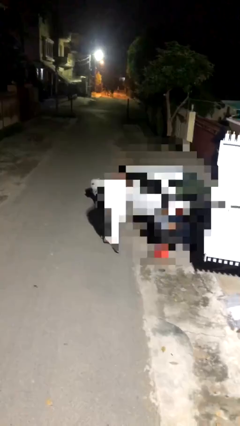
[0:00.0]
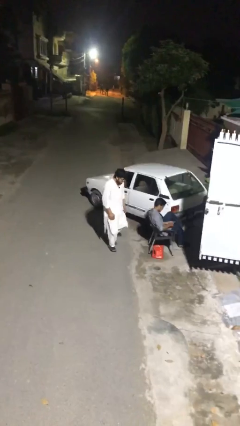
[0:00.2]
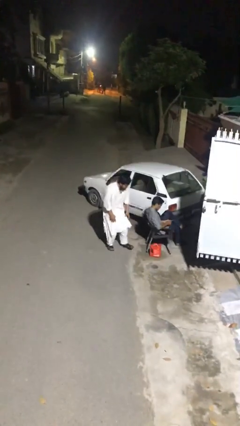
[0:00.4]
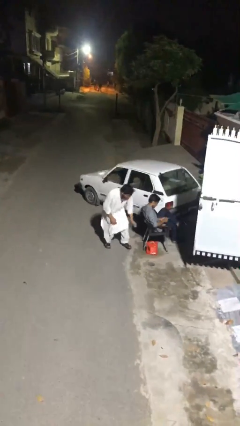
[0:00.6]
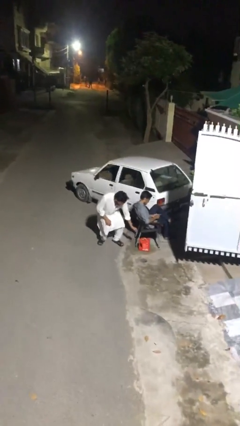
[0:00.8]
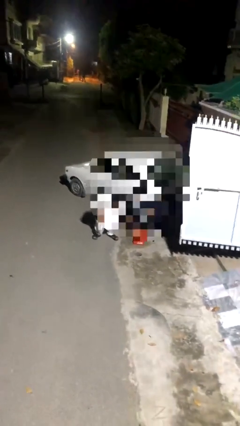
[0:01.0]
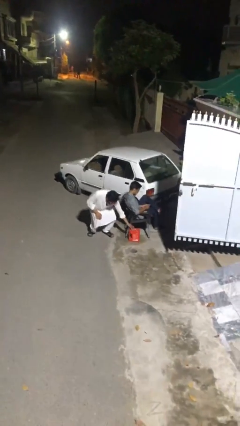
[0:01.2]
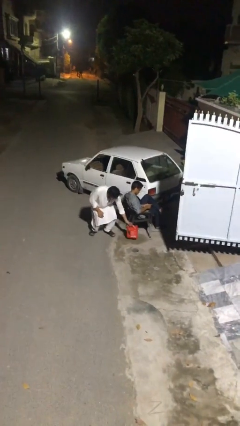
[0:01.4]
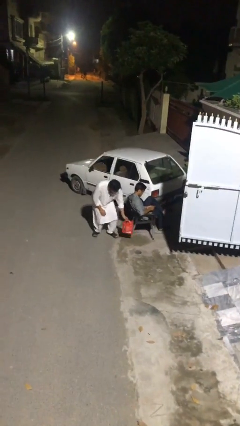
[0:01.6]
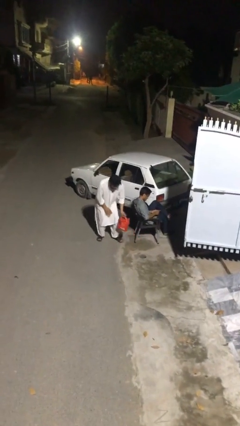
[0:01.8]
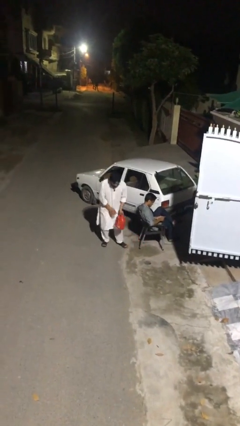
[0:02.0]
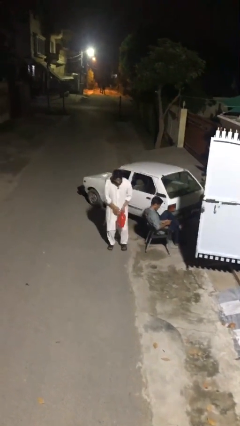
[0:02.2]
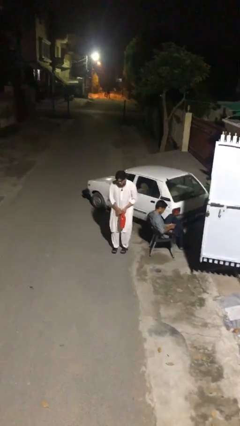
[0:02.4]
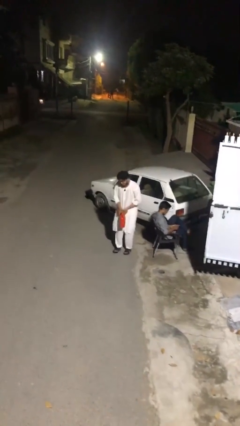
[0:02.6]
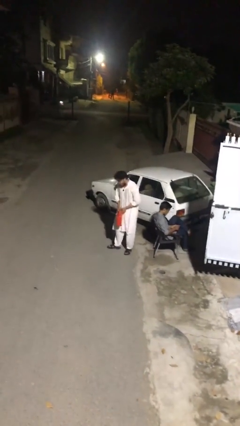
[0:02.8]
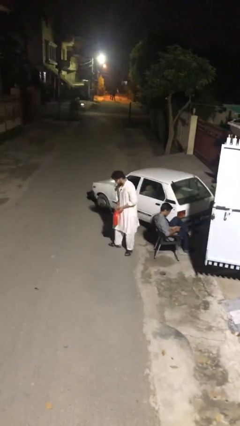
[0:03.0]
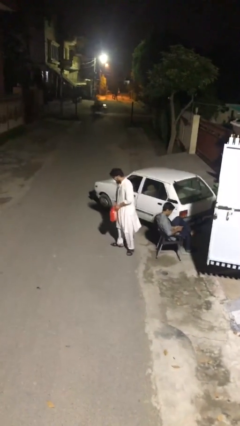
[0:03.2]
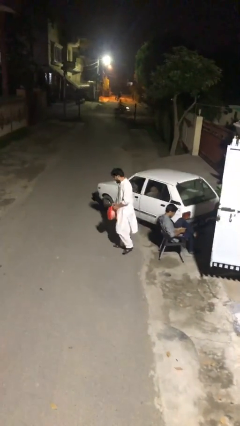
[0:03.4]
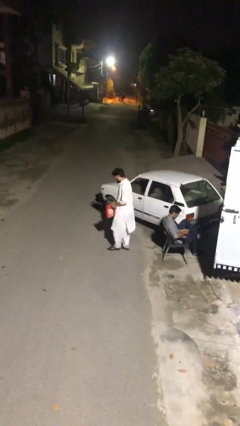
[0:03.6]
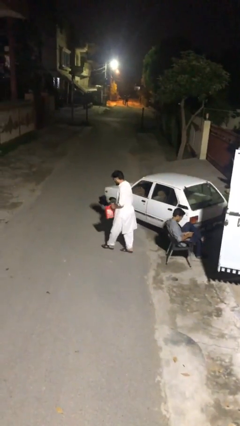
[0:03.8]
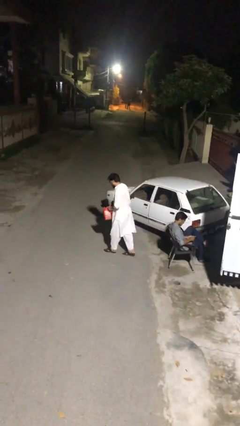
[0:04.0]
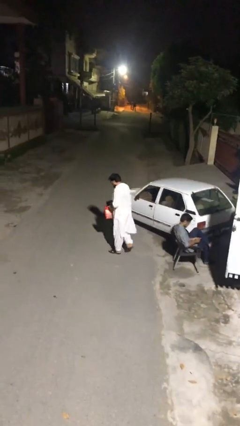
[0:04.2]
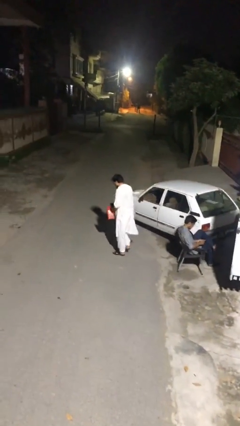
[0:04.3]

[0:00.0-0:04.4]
person steals object from person

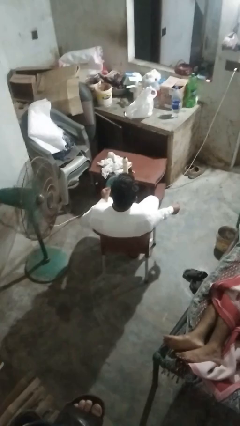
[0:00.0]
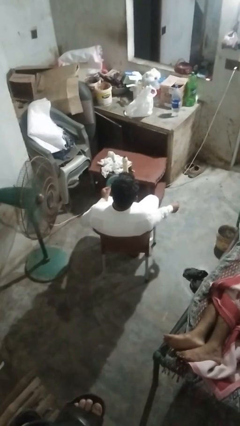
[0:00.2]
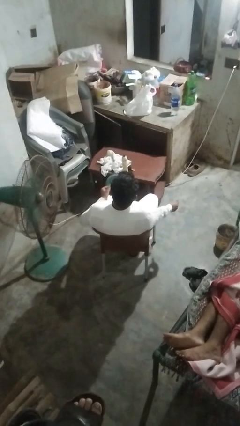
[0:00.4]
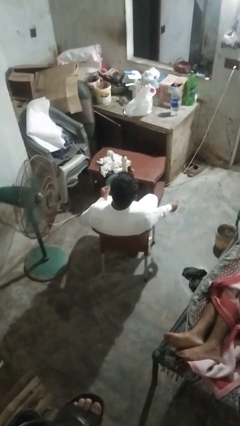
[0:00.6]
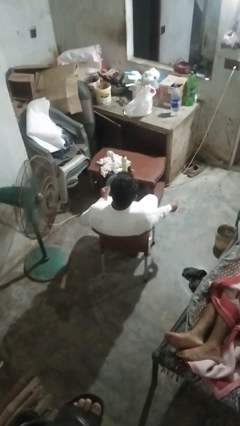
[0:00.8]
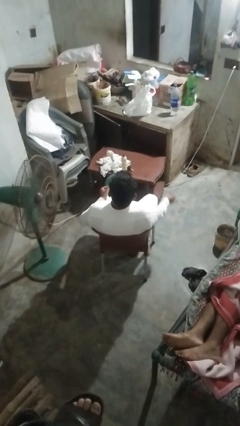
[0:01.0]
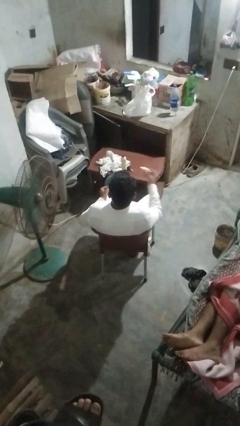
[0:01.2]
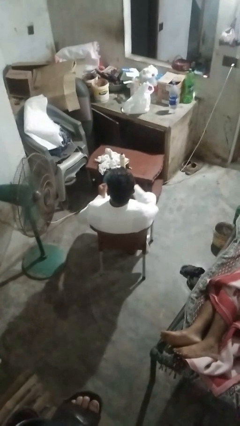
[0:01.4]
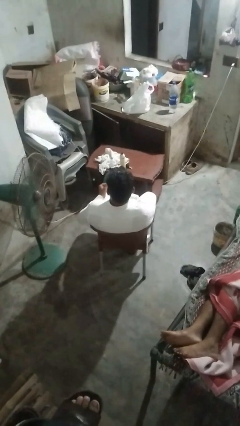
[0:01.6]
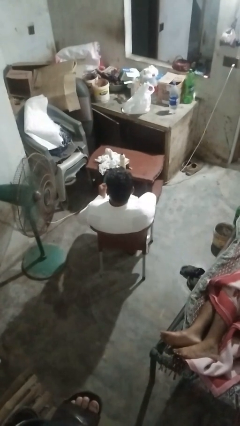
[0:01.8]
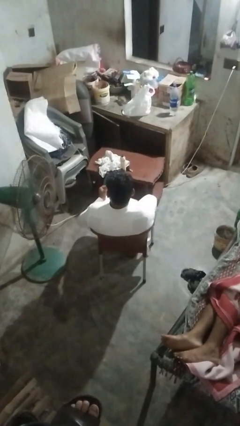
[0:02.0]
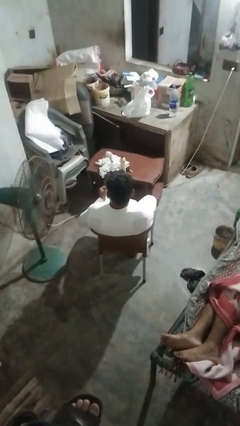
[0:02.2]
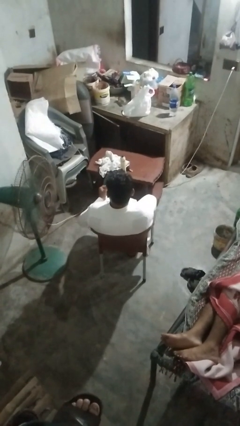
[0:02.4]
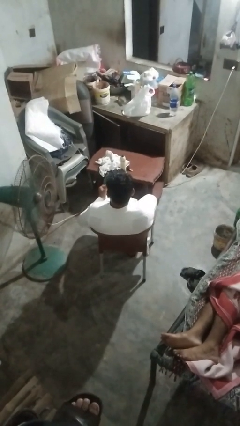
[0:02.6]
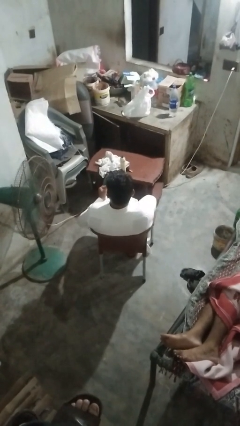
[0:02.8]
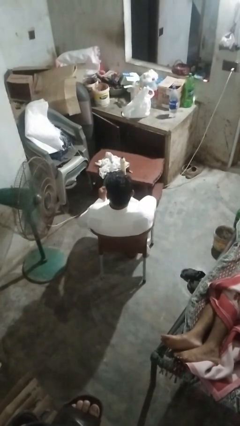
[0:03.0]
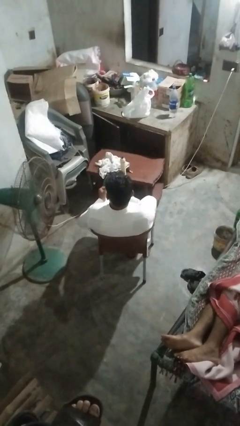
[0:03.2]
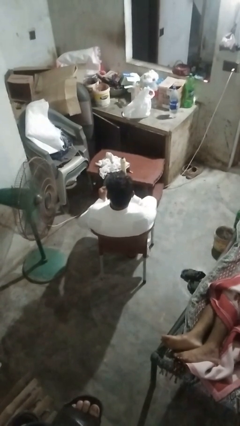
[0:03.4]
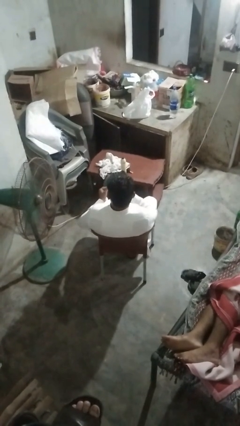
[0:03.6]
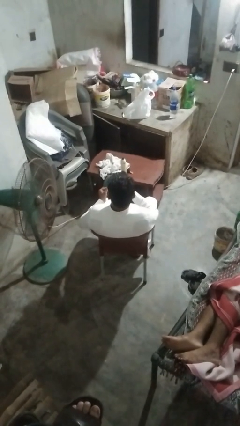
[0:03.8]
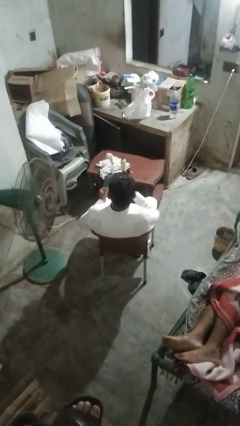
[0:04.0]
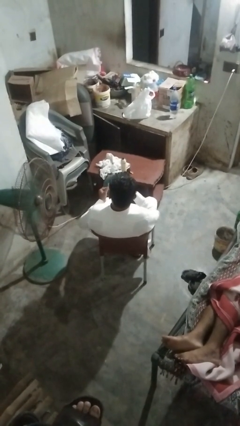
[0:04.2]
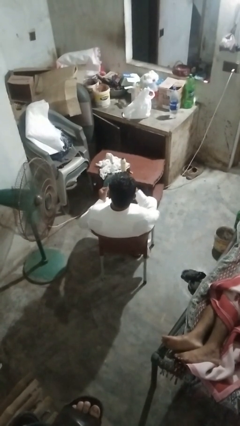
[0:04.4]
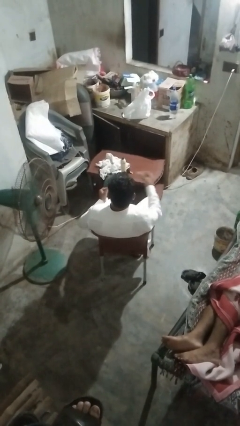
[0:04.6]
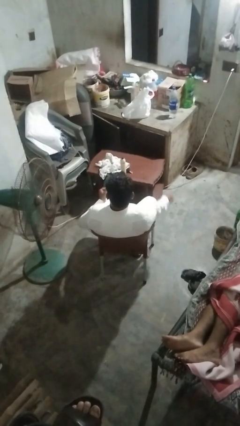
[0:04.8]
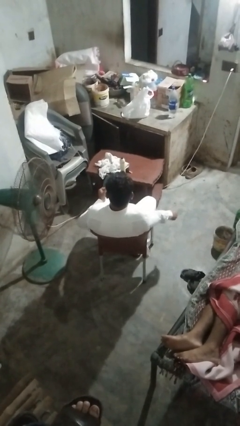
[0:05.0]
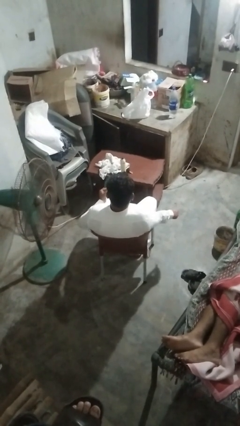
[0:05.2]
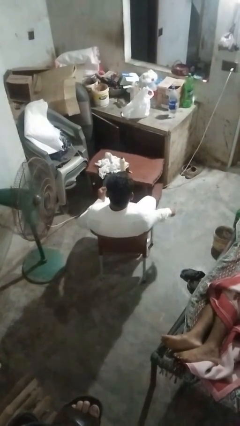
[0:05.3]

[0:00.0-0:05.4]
person applies lip makeup

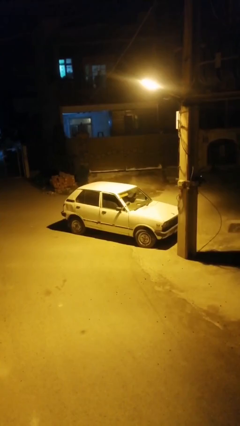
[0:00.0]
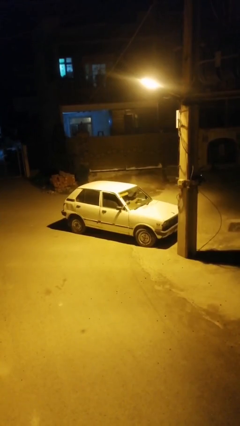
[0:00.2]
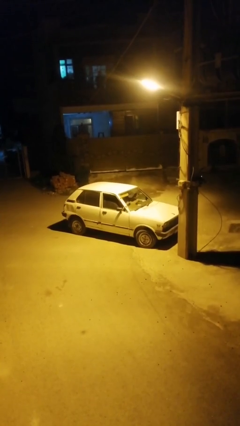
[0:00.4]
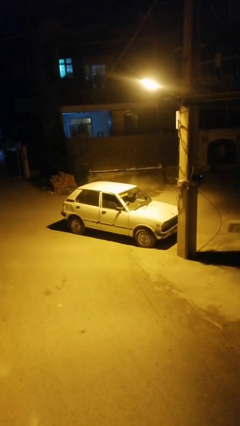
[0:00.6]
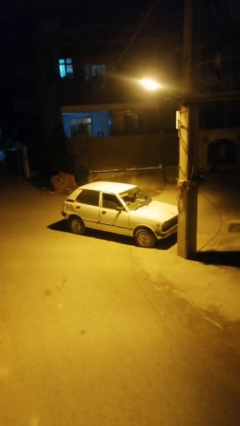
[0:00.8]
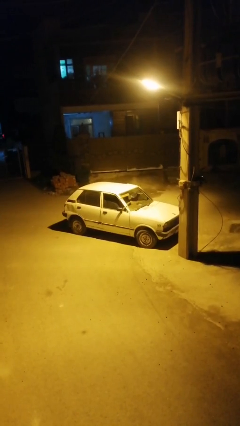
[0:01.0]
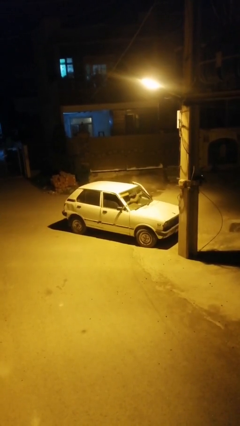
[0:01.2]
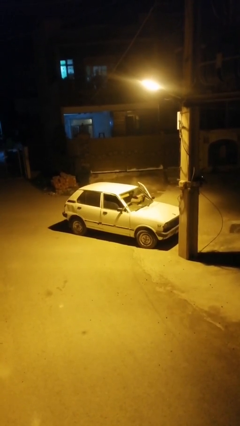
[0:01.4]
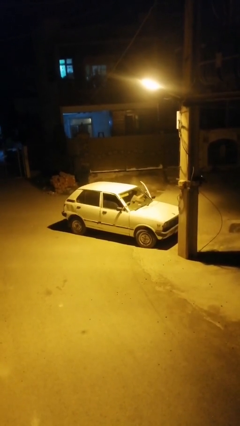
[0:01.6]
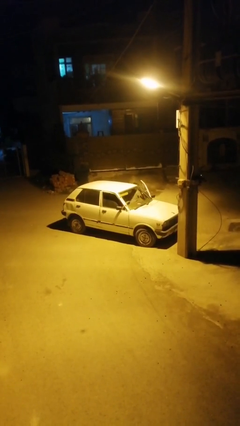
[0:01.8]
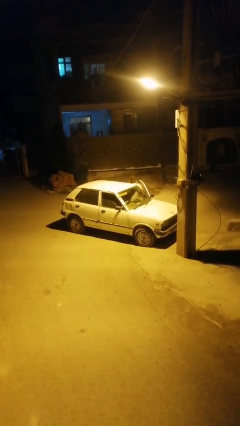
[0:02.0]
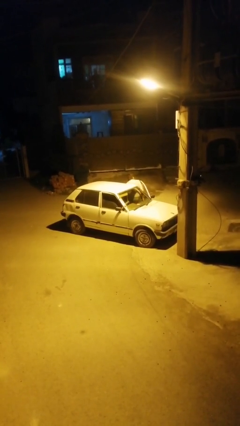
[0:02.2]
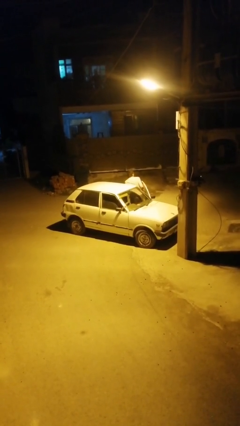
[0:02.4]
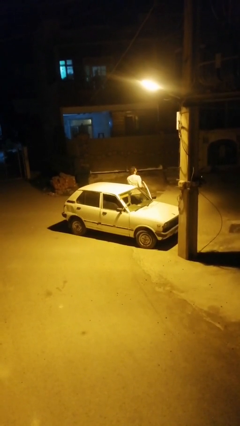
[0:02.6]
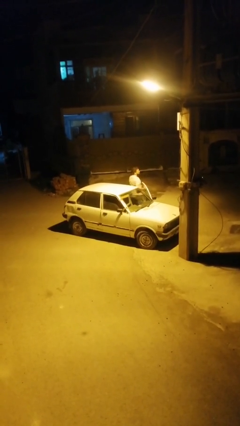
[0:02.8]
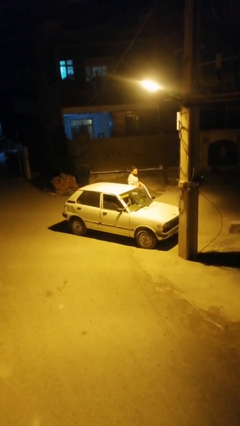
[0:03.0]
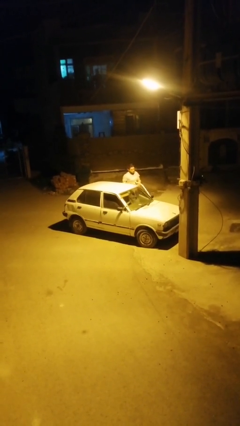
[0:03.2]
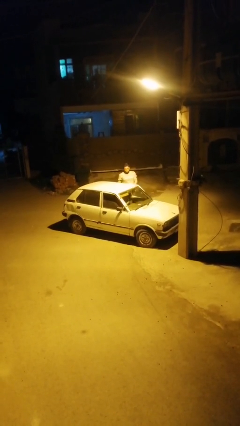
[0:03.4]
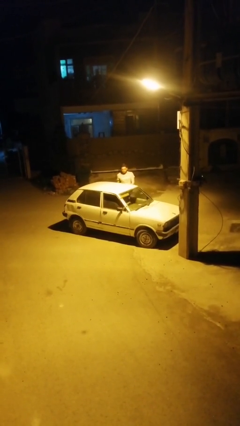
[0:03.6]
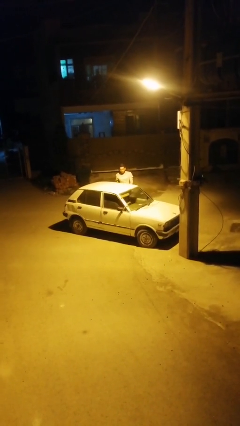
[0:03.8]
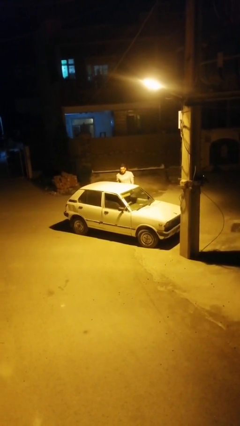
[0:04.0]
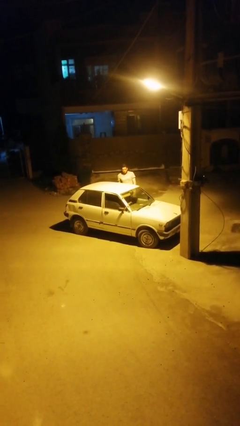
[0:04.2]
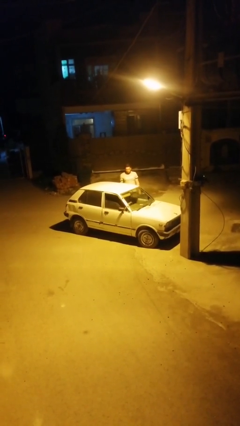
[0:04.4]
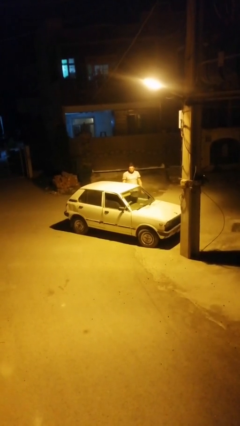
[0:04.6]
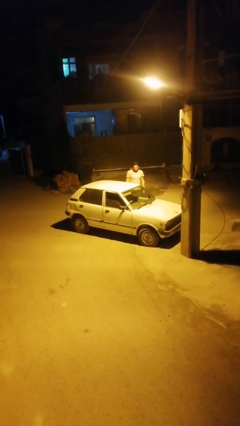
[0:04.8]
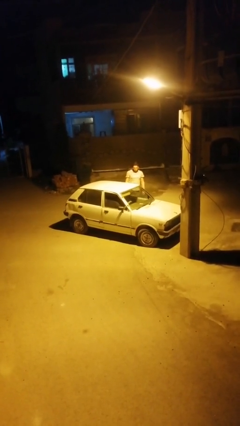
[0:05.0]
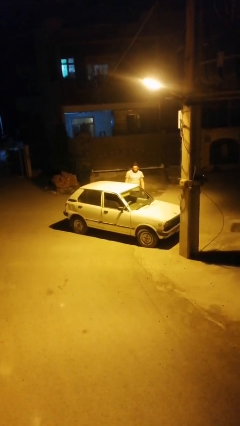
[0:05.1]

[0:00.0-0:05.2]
car drops off person

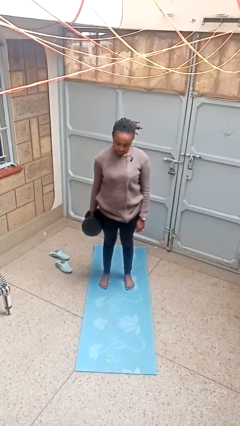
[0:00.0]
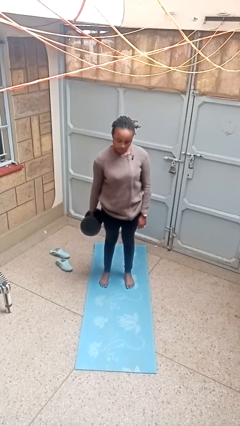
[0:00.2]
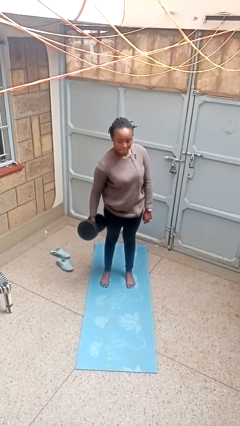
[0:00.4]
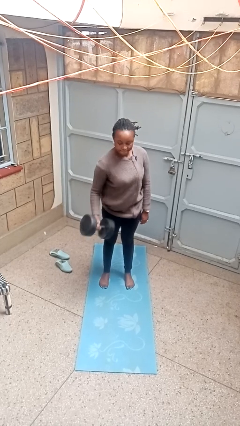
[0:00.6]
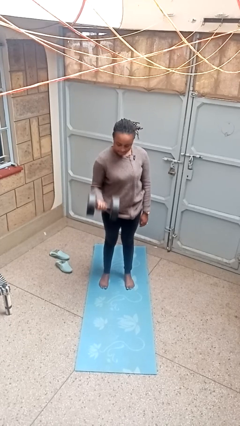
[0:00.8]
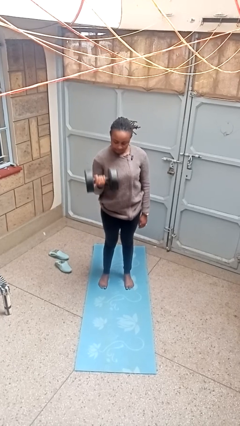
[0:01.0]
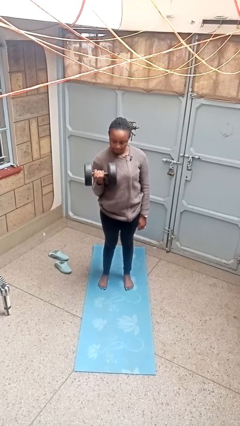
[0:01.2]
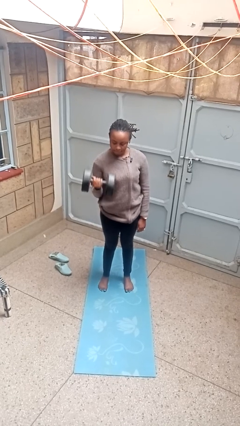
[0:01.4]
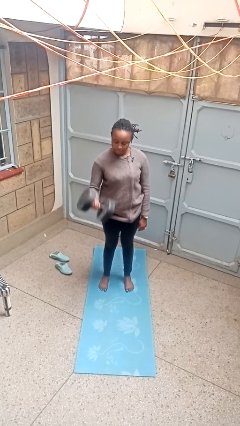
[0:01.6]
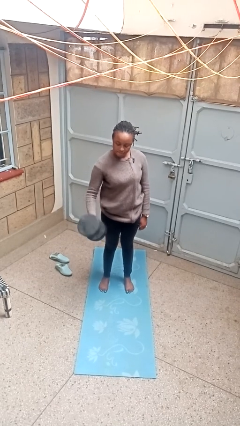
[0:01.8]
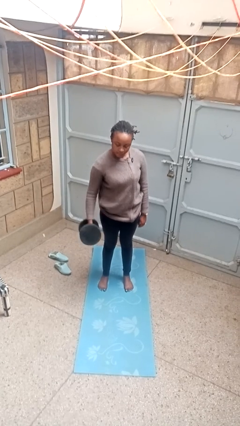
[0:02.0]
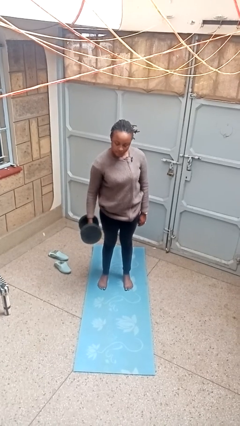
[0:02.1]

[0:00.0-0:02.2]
person lifts dumbbells

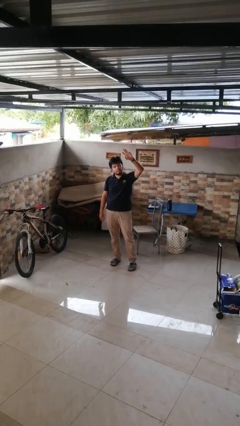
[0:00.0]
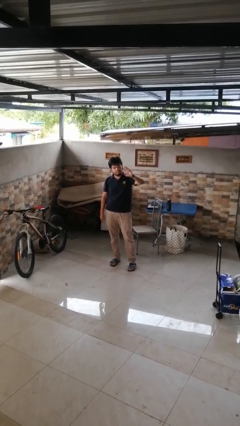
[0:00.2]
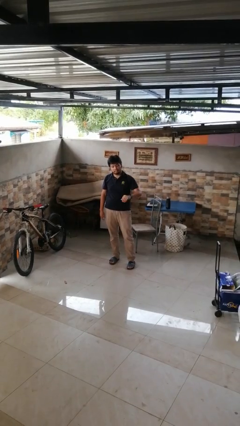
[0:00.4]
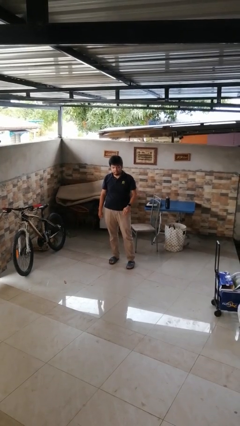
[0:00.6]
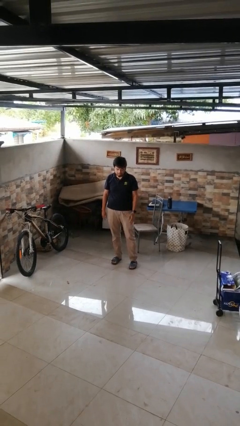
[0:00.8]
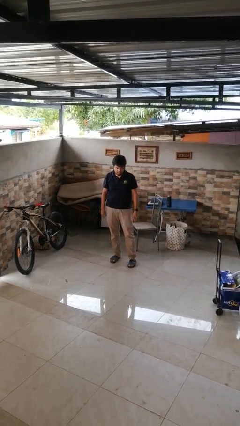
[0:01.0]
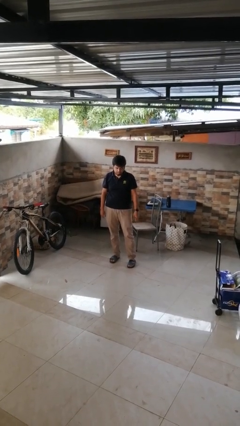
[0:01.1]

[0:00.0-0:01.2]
person gestures swipe down
